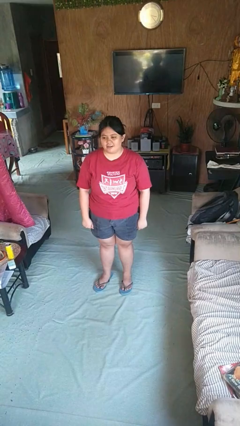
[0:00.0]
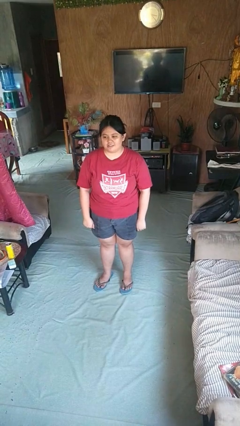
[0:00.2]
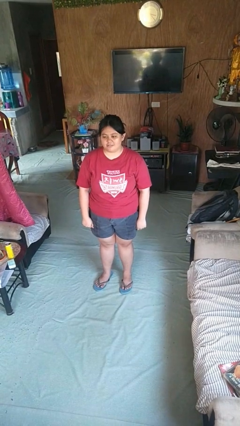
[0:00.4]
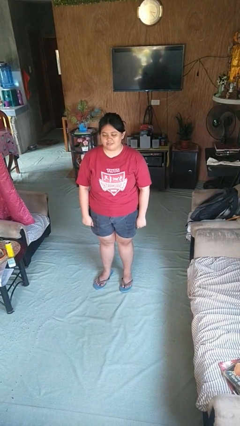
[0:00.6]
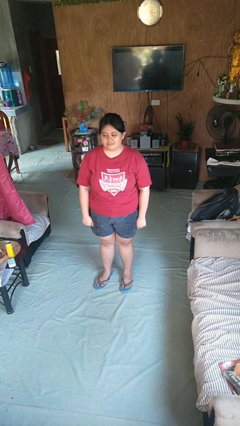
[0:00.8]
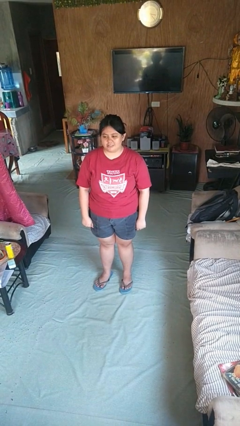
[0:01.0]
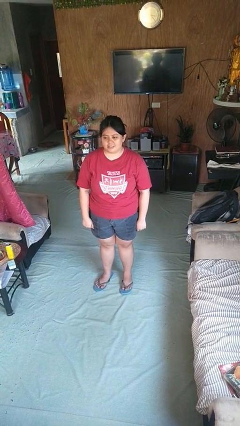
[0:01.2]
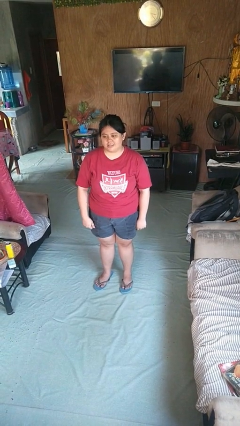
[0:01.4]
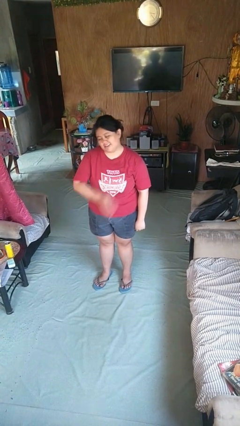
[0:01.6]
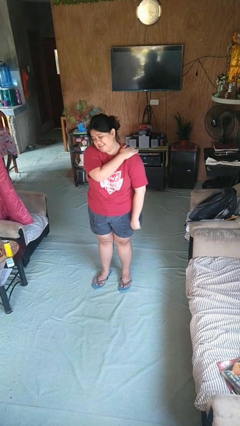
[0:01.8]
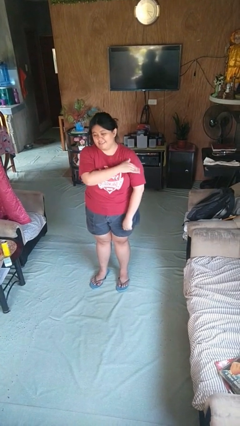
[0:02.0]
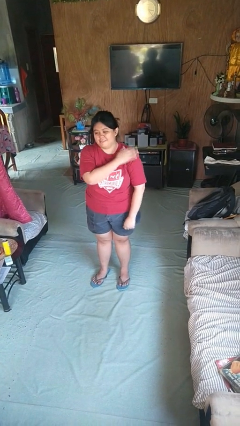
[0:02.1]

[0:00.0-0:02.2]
person swats bug

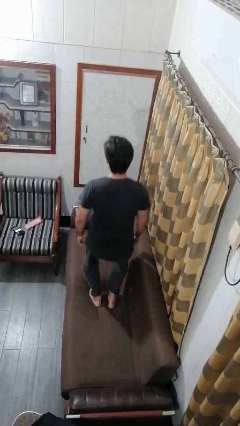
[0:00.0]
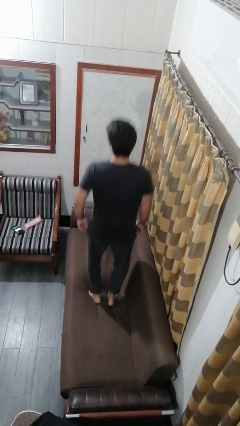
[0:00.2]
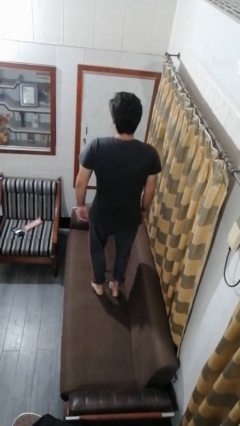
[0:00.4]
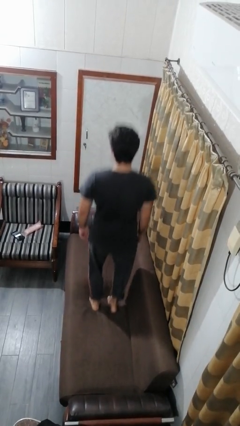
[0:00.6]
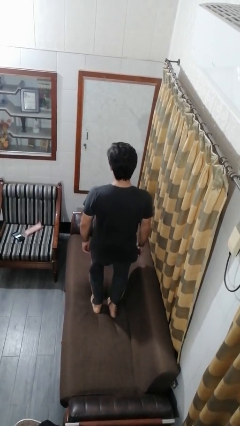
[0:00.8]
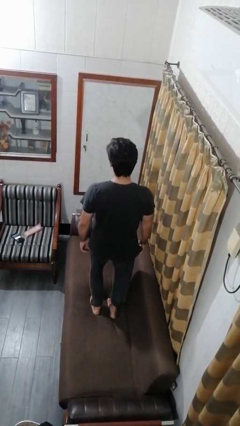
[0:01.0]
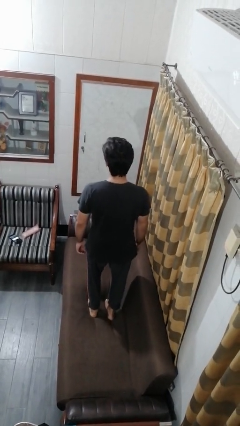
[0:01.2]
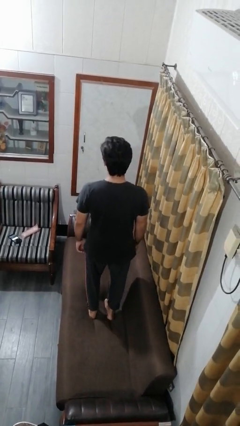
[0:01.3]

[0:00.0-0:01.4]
person jumps on couch

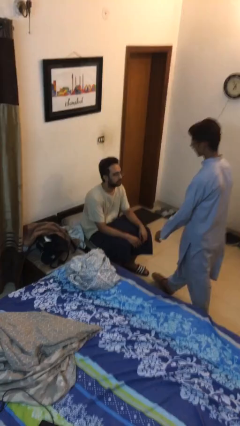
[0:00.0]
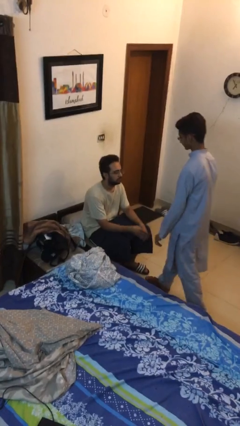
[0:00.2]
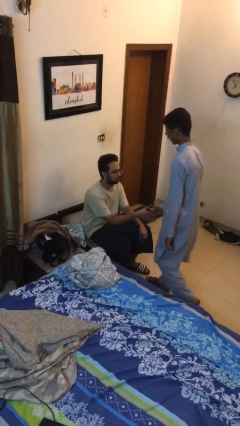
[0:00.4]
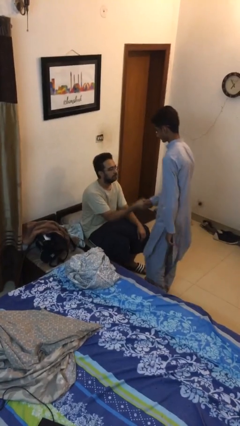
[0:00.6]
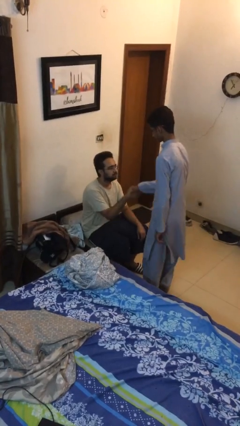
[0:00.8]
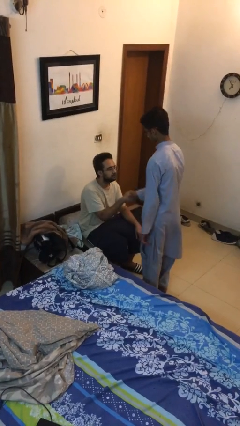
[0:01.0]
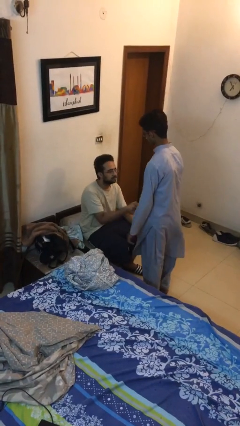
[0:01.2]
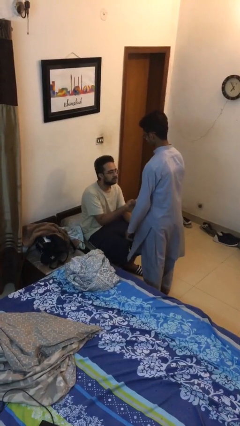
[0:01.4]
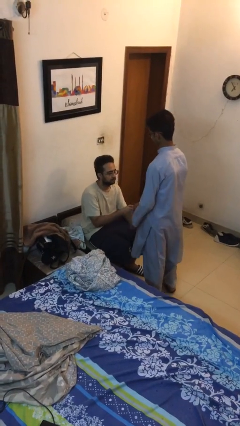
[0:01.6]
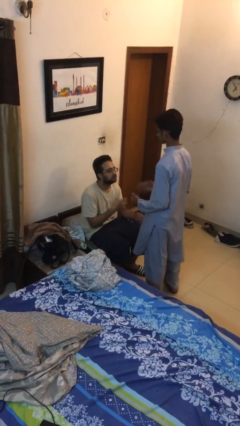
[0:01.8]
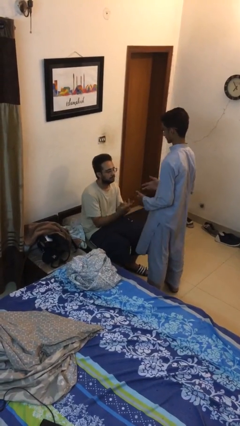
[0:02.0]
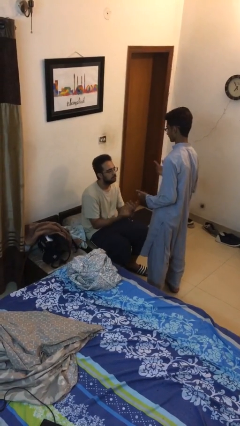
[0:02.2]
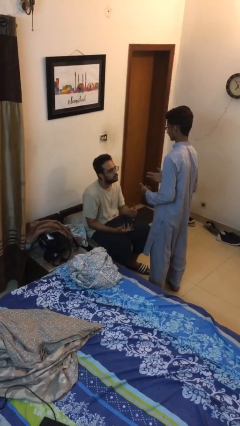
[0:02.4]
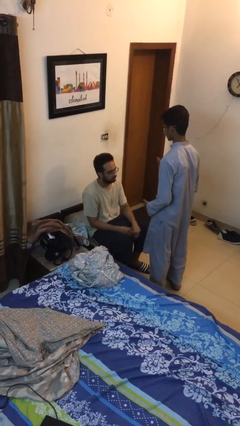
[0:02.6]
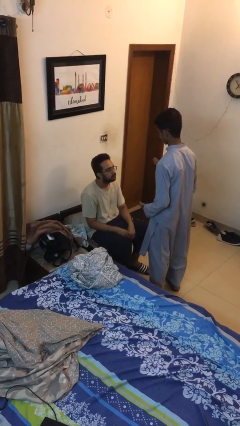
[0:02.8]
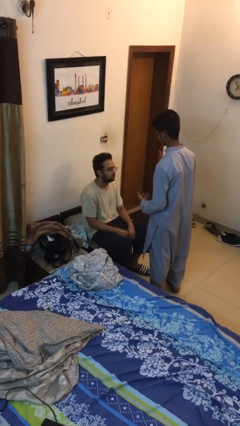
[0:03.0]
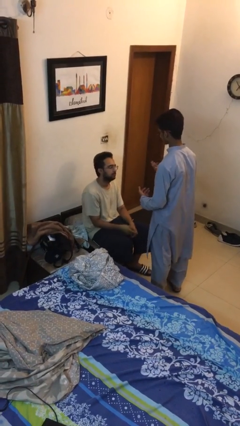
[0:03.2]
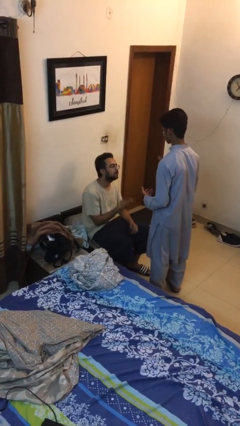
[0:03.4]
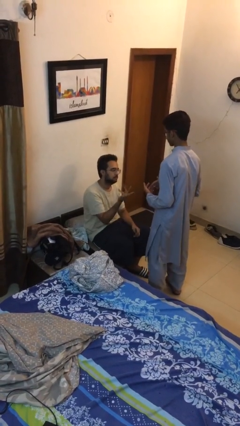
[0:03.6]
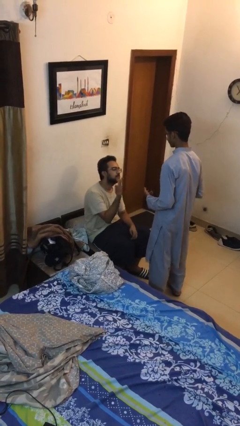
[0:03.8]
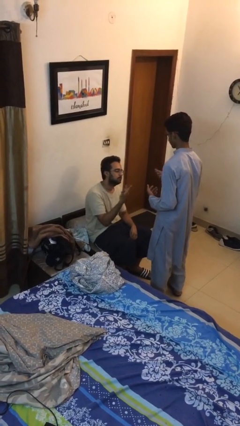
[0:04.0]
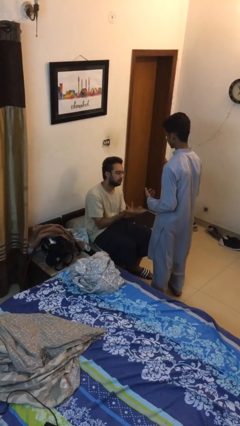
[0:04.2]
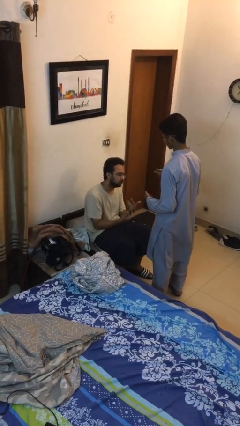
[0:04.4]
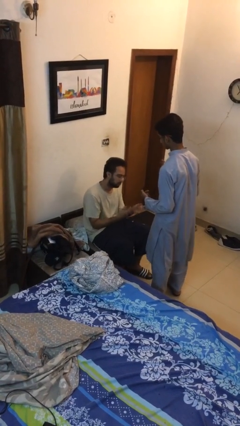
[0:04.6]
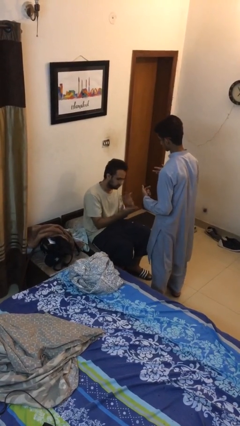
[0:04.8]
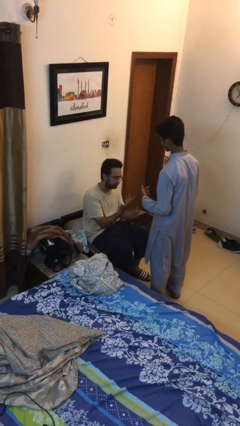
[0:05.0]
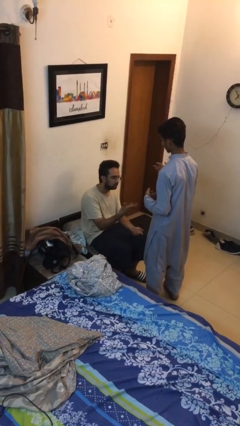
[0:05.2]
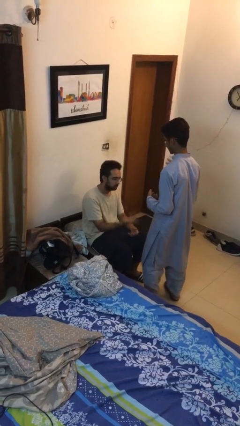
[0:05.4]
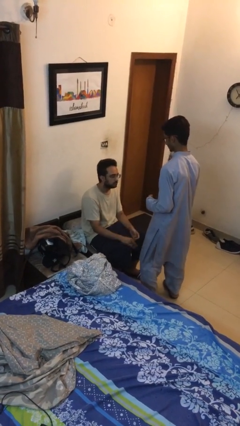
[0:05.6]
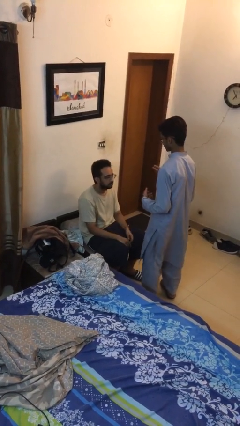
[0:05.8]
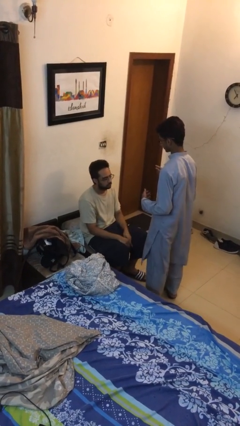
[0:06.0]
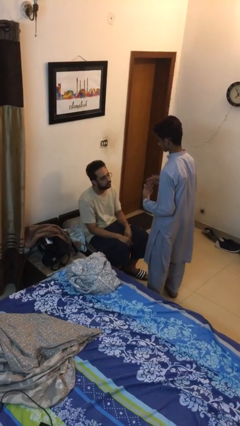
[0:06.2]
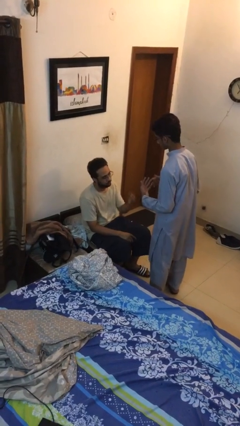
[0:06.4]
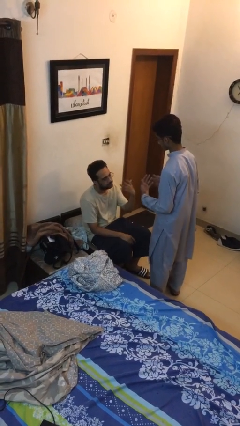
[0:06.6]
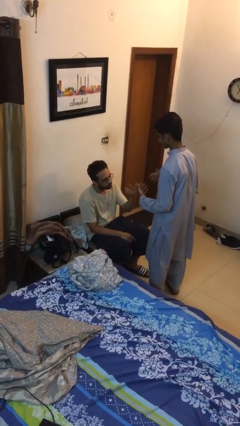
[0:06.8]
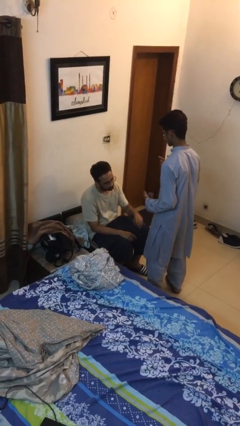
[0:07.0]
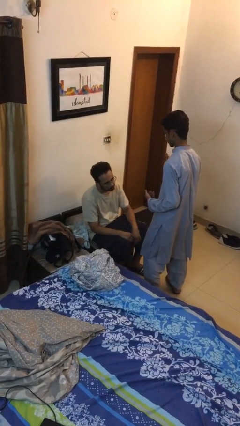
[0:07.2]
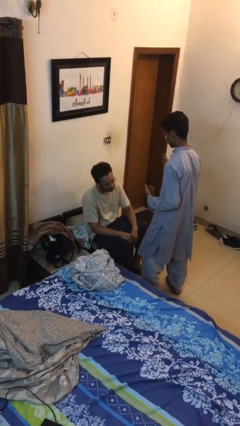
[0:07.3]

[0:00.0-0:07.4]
person shakes hand

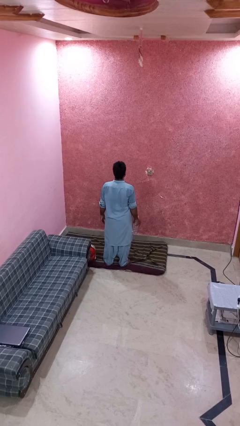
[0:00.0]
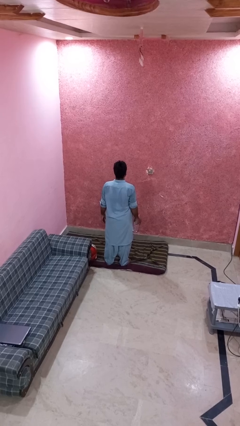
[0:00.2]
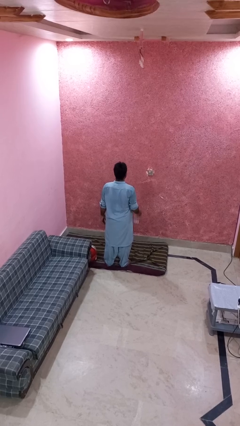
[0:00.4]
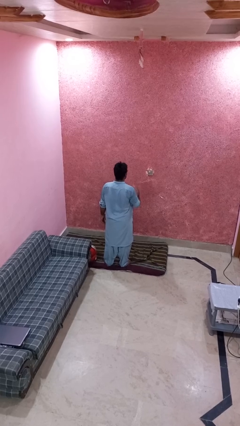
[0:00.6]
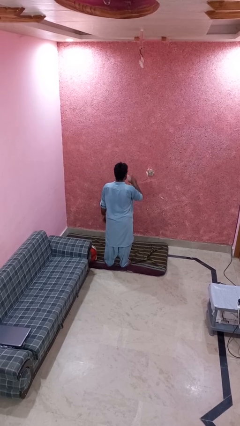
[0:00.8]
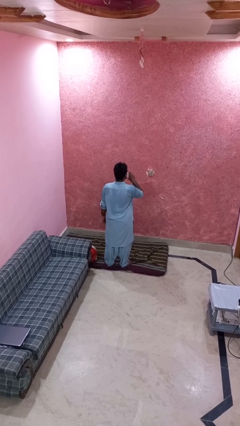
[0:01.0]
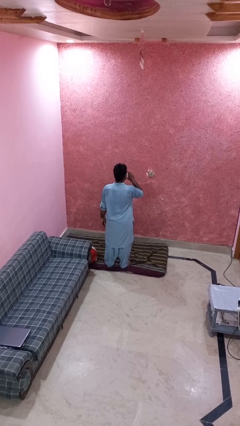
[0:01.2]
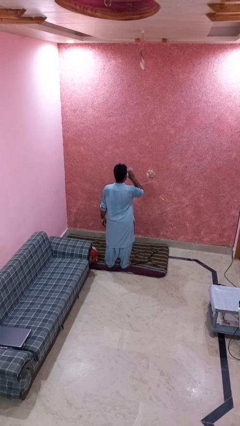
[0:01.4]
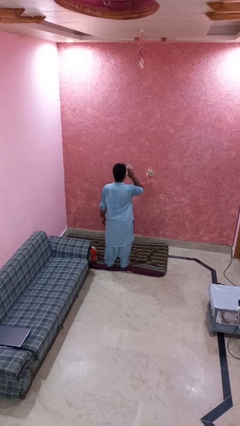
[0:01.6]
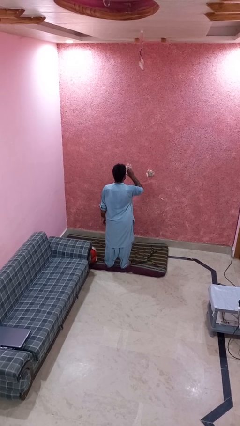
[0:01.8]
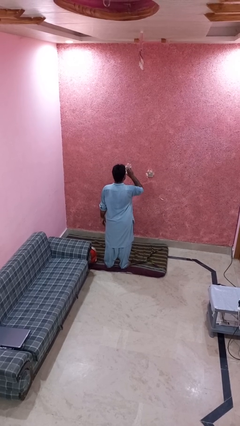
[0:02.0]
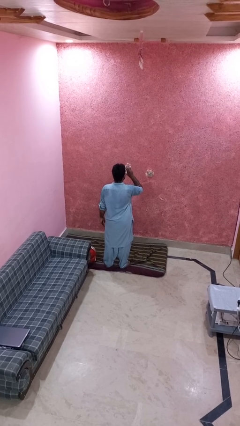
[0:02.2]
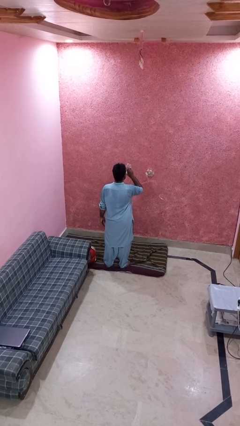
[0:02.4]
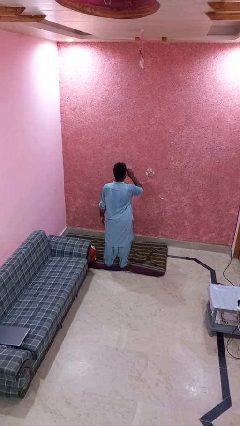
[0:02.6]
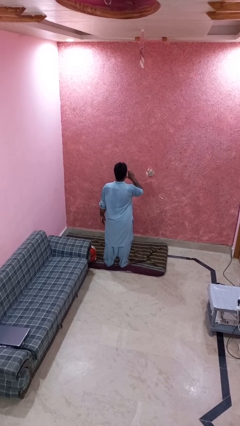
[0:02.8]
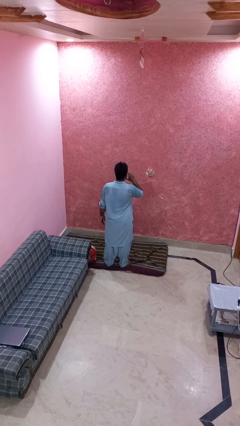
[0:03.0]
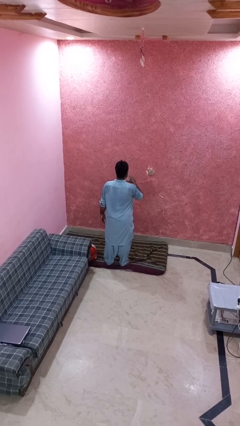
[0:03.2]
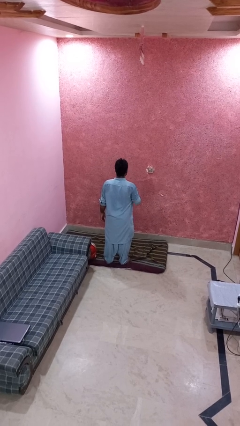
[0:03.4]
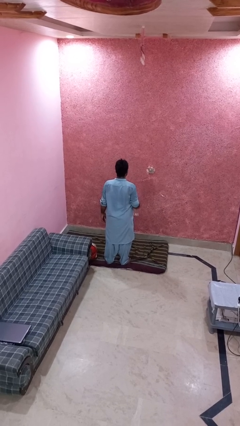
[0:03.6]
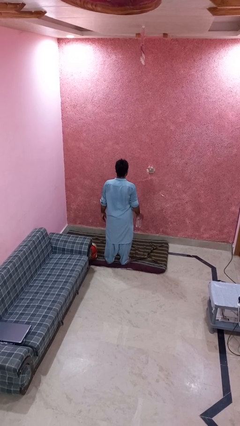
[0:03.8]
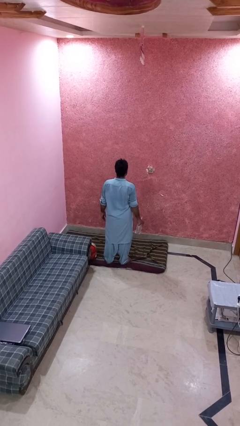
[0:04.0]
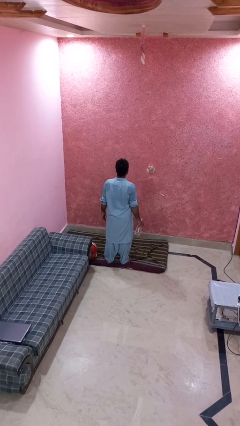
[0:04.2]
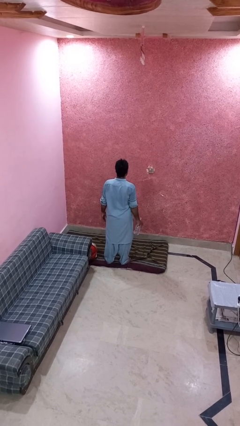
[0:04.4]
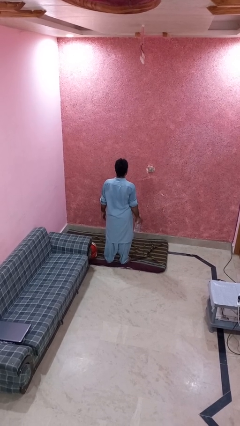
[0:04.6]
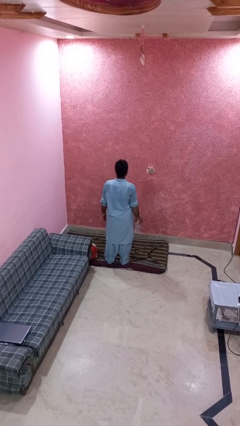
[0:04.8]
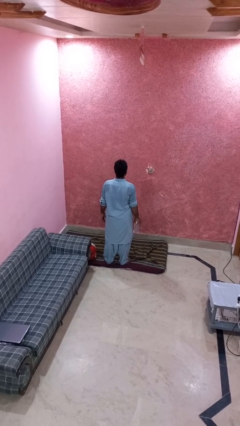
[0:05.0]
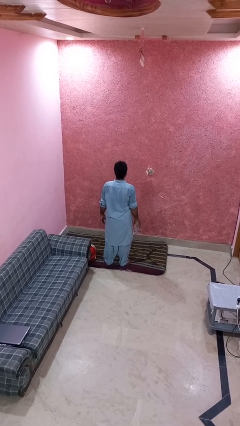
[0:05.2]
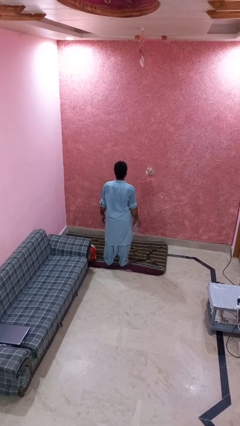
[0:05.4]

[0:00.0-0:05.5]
person drinks from bottle

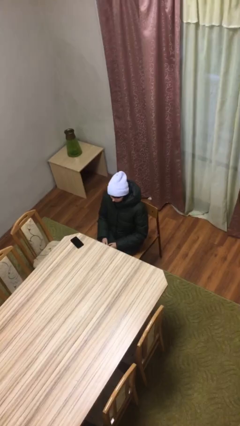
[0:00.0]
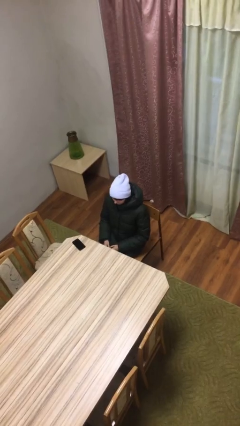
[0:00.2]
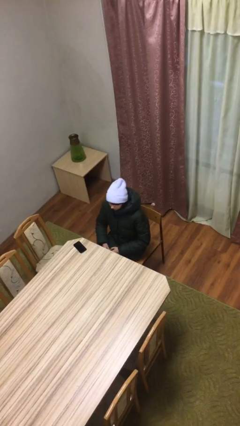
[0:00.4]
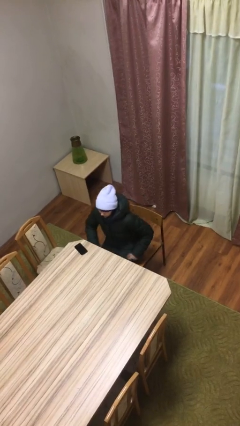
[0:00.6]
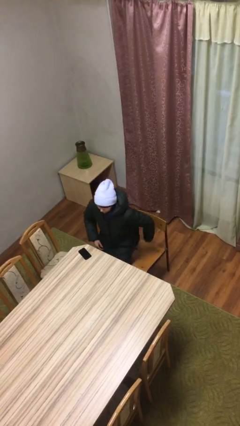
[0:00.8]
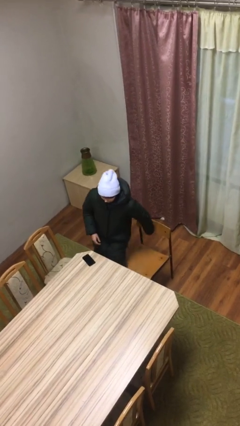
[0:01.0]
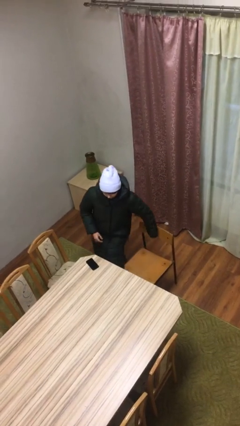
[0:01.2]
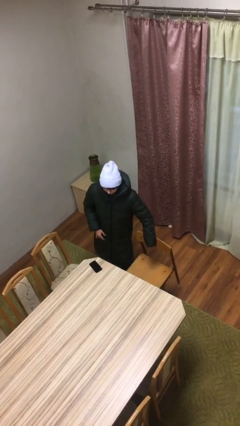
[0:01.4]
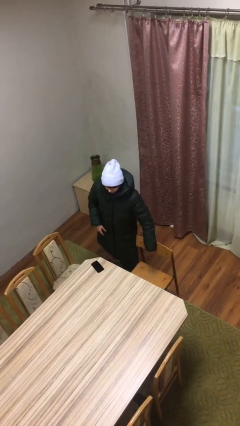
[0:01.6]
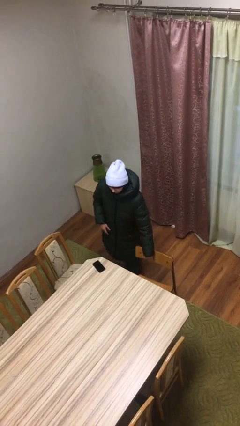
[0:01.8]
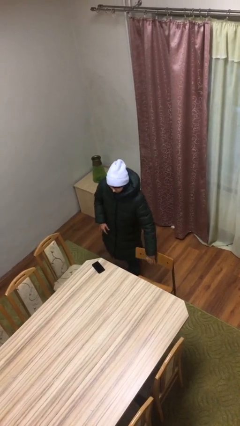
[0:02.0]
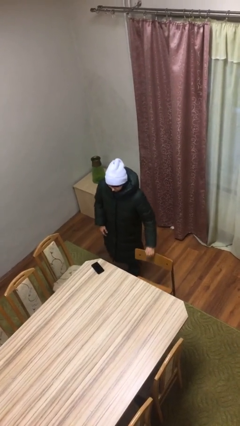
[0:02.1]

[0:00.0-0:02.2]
person stands up
